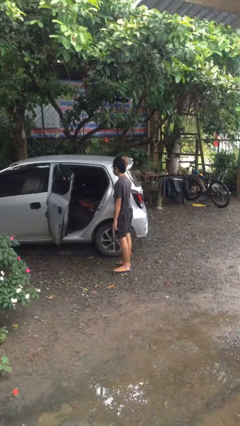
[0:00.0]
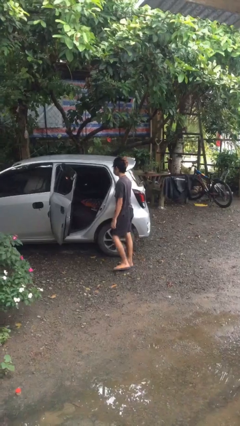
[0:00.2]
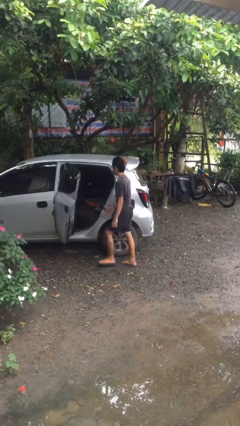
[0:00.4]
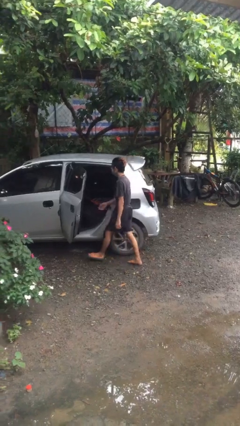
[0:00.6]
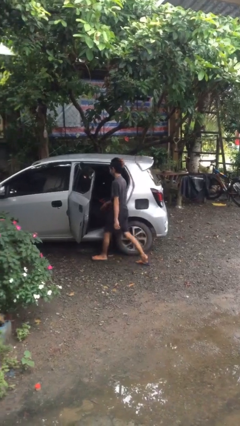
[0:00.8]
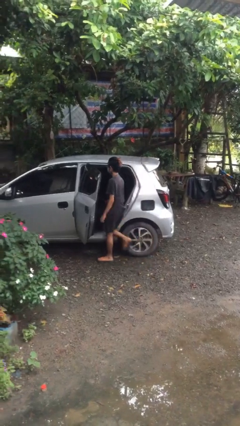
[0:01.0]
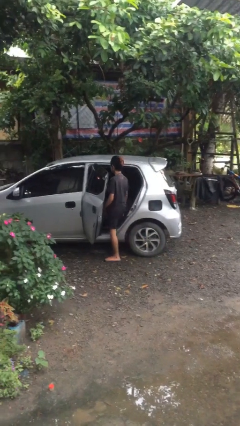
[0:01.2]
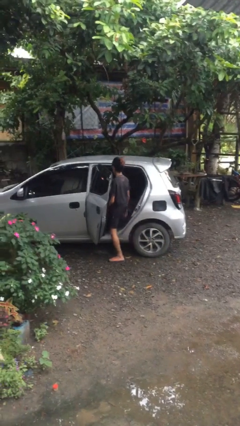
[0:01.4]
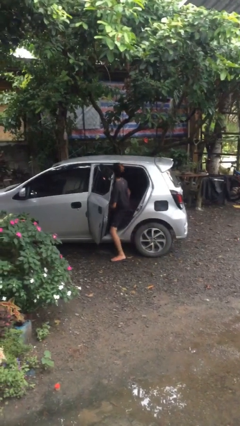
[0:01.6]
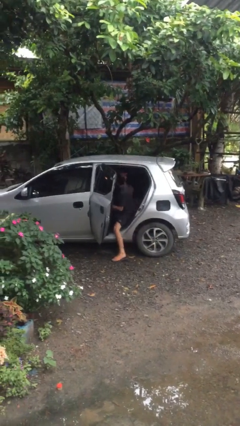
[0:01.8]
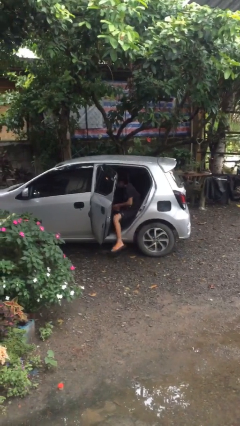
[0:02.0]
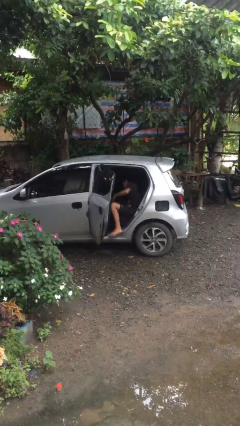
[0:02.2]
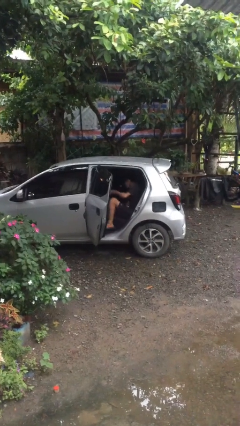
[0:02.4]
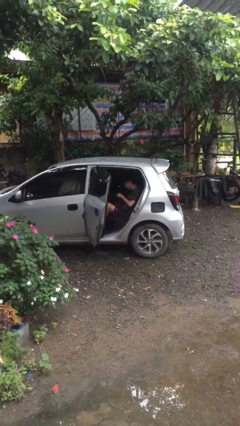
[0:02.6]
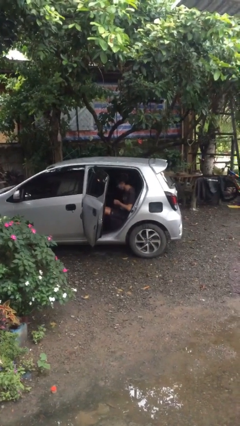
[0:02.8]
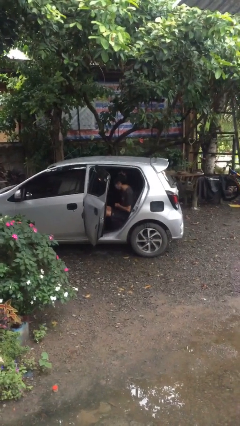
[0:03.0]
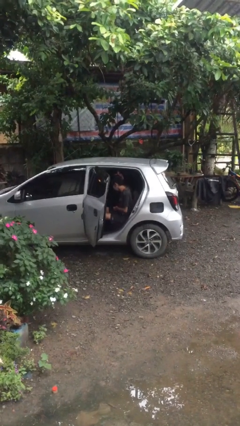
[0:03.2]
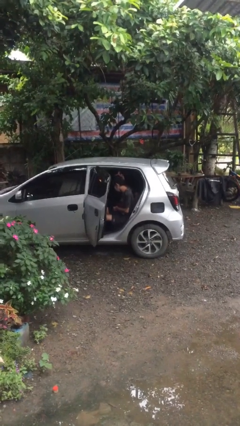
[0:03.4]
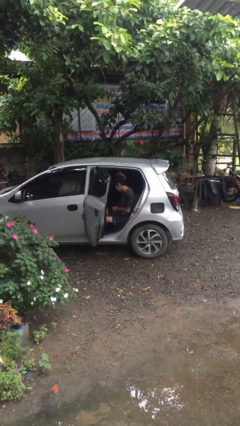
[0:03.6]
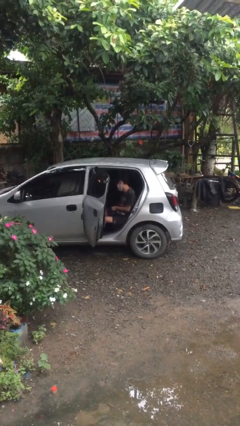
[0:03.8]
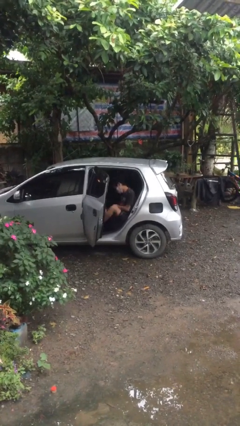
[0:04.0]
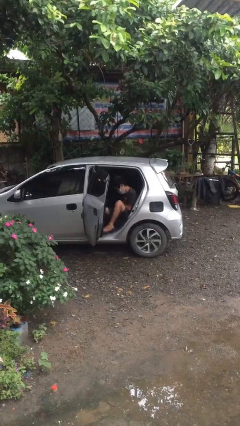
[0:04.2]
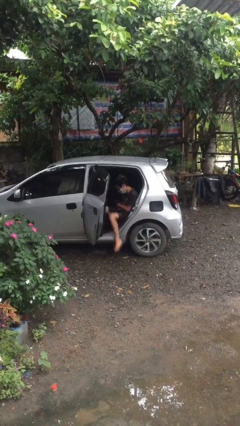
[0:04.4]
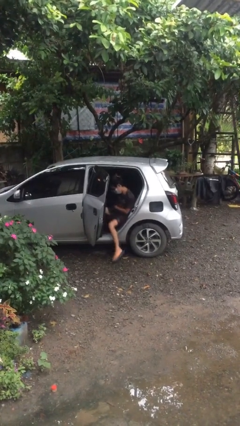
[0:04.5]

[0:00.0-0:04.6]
person enters car

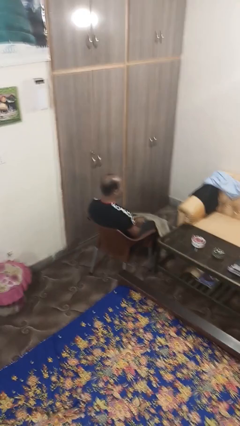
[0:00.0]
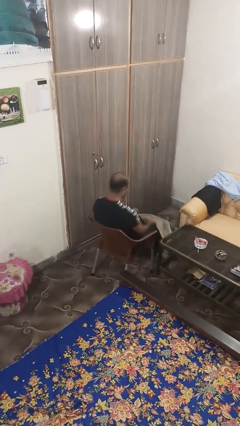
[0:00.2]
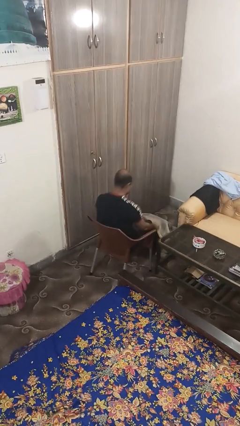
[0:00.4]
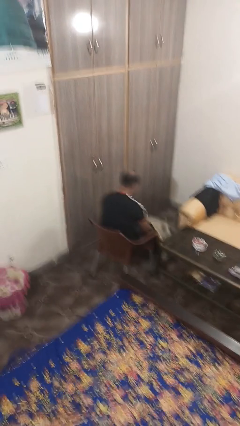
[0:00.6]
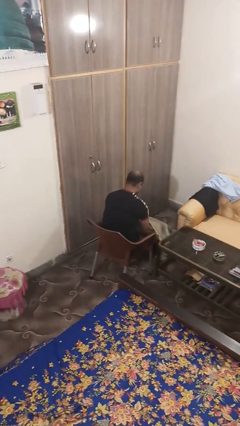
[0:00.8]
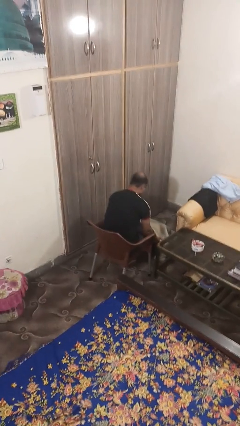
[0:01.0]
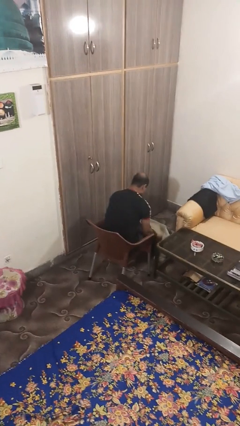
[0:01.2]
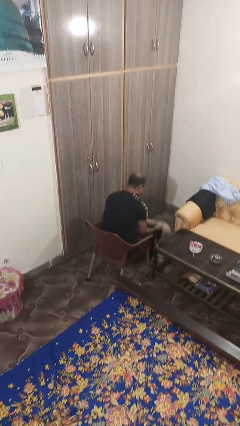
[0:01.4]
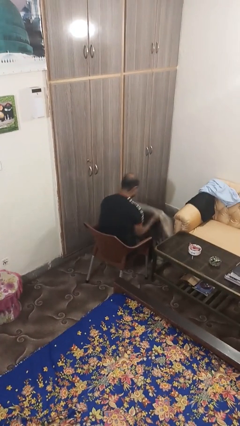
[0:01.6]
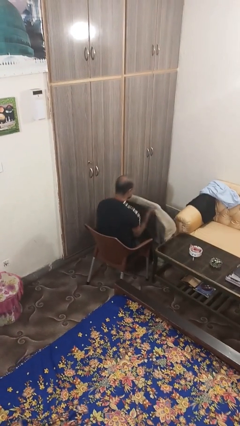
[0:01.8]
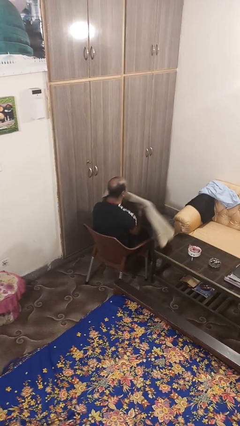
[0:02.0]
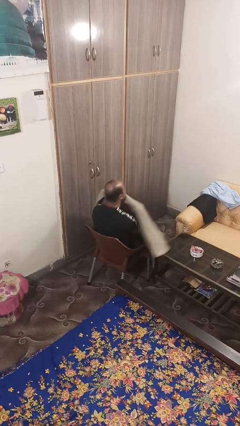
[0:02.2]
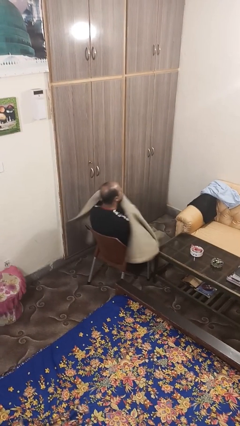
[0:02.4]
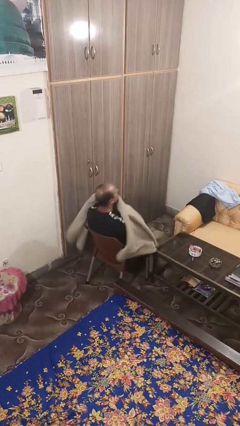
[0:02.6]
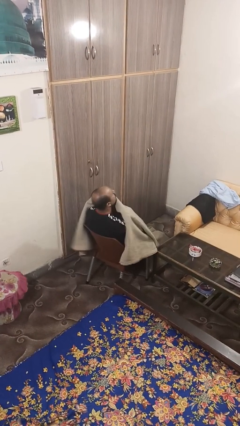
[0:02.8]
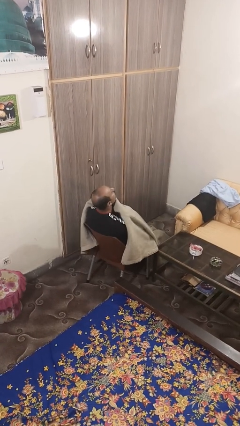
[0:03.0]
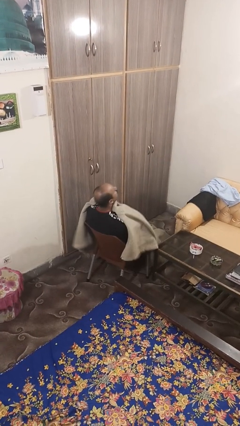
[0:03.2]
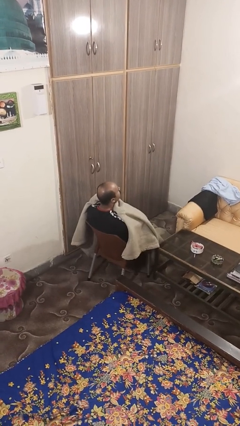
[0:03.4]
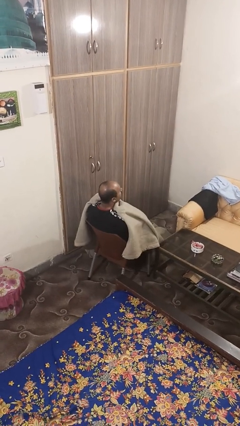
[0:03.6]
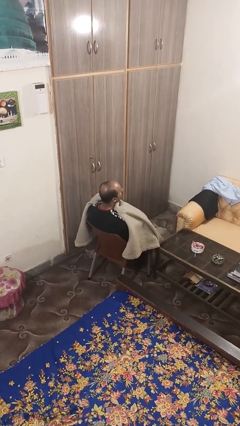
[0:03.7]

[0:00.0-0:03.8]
person covers with blanket

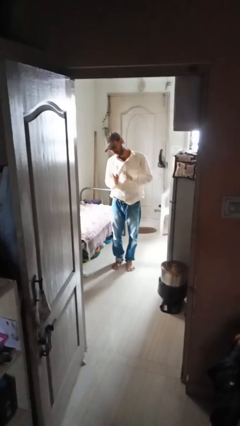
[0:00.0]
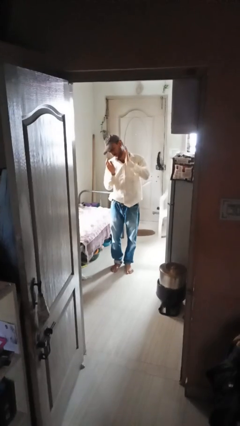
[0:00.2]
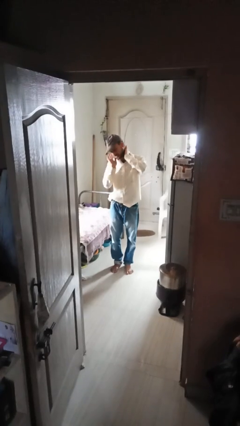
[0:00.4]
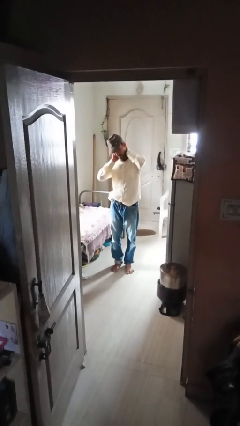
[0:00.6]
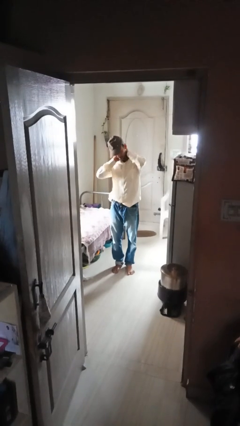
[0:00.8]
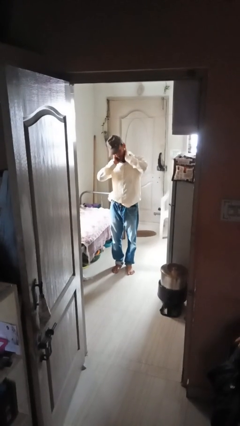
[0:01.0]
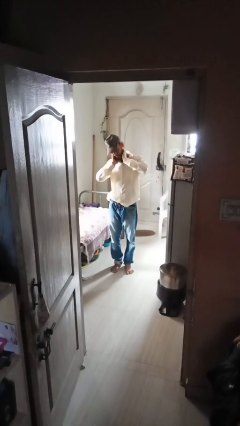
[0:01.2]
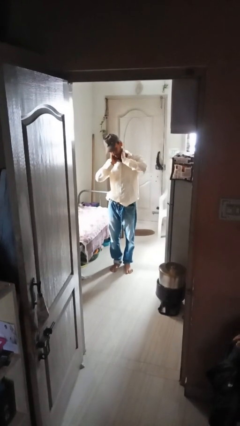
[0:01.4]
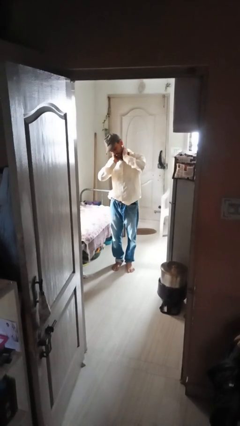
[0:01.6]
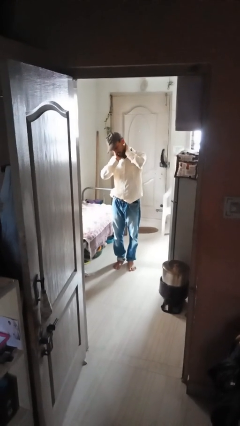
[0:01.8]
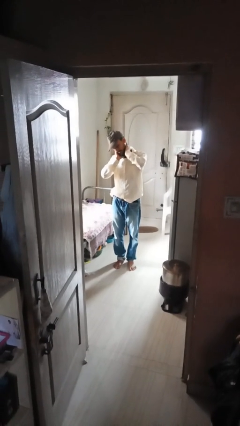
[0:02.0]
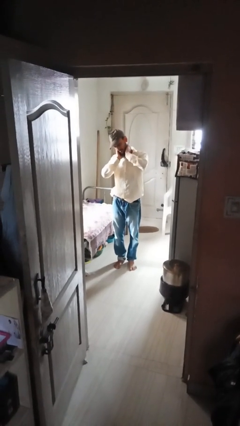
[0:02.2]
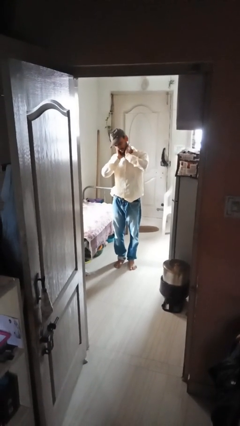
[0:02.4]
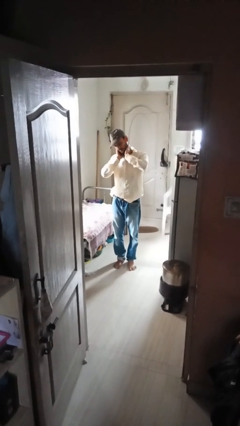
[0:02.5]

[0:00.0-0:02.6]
person rubs neck

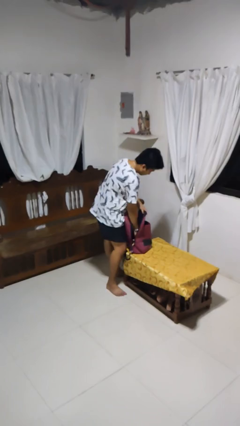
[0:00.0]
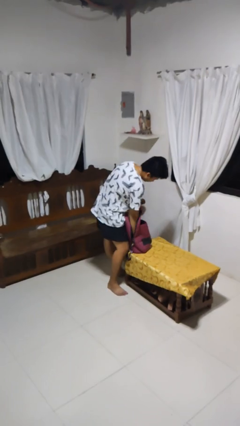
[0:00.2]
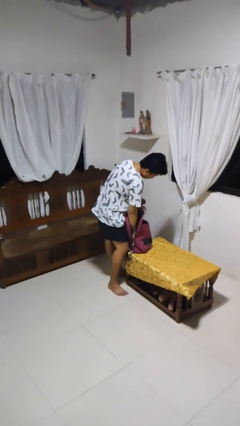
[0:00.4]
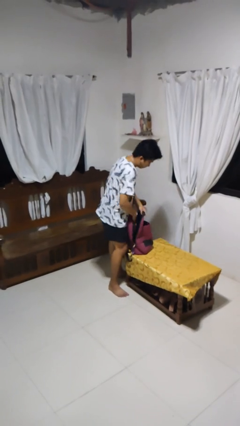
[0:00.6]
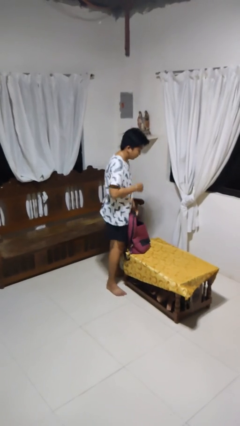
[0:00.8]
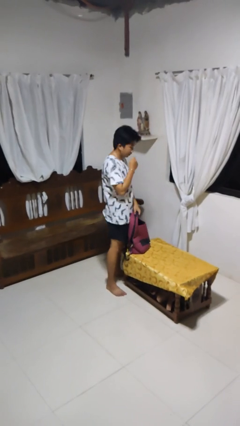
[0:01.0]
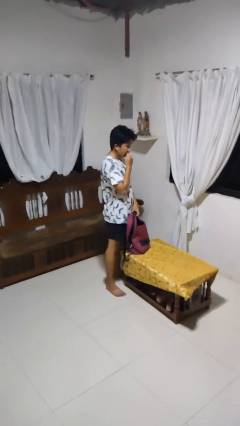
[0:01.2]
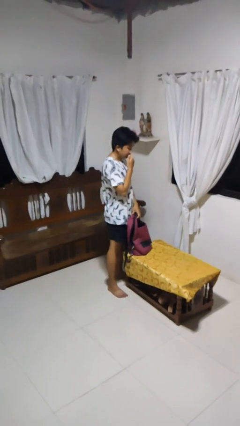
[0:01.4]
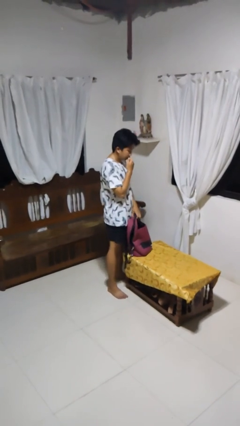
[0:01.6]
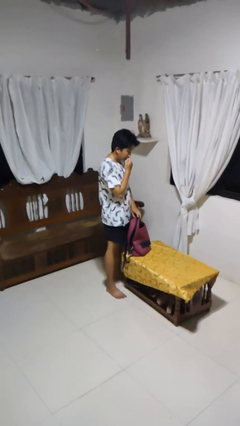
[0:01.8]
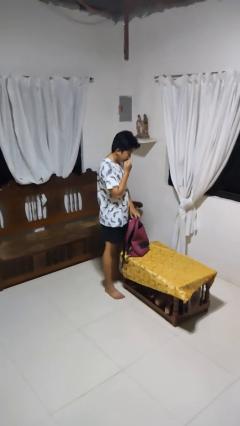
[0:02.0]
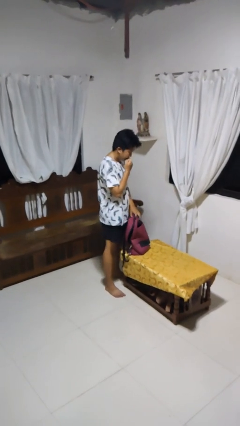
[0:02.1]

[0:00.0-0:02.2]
person eats snack from bag

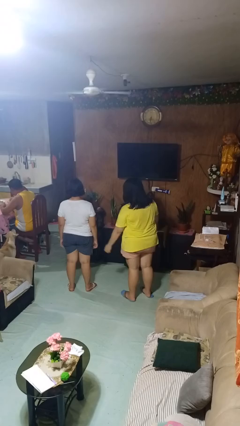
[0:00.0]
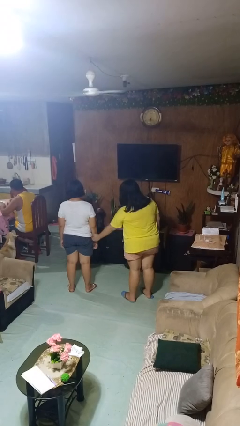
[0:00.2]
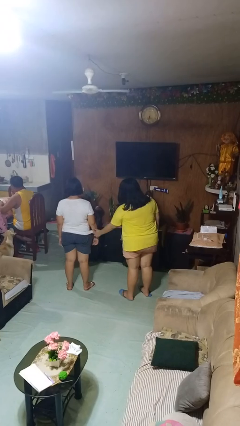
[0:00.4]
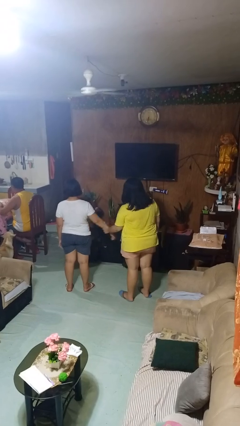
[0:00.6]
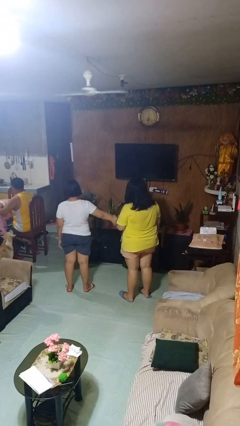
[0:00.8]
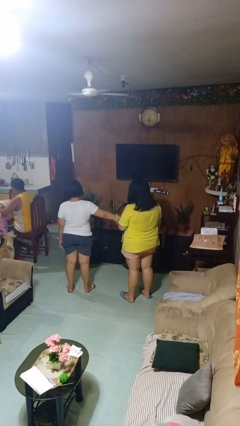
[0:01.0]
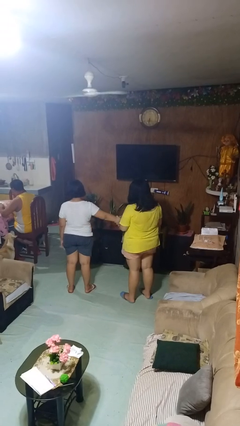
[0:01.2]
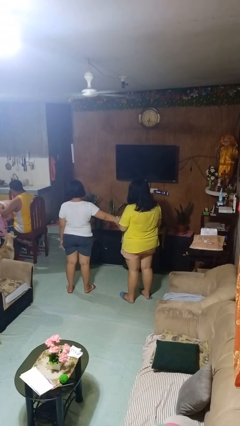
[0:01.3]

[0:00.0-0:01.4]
person grabs person by forearm

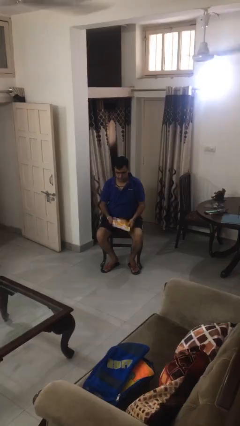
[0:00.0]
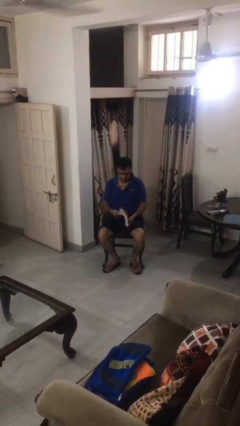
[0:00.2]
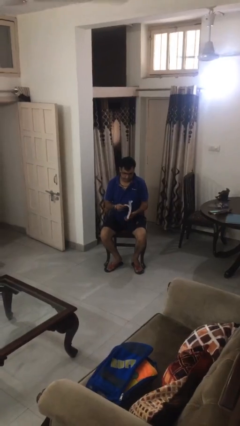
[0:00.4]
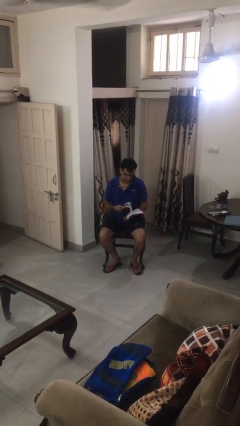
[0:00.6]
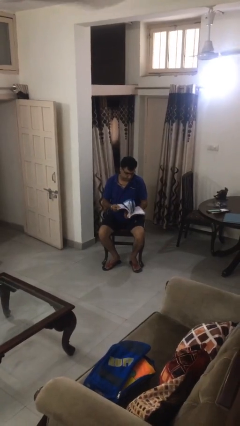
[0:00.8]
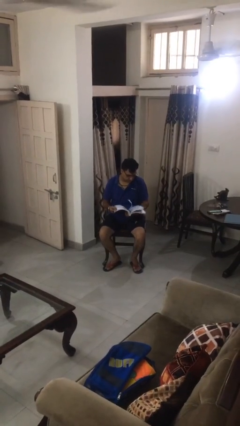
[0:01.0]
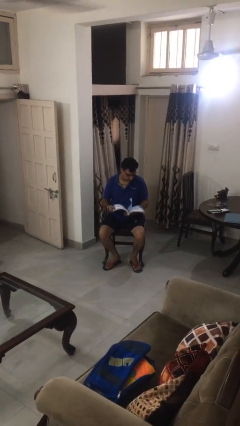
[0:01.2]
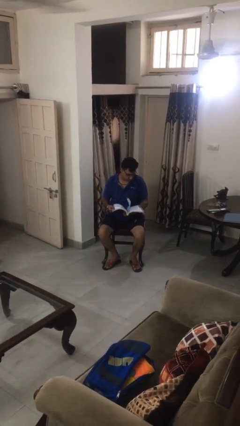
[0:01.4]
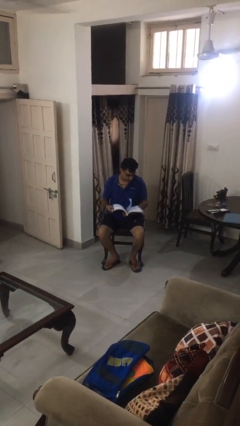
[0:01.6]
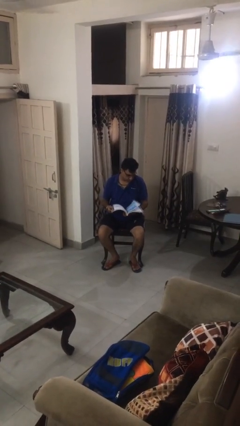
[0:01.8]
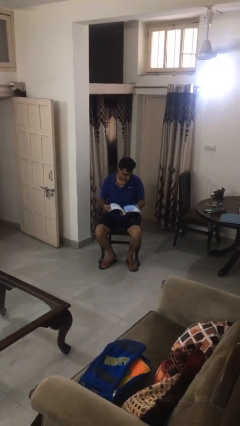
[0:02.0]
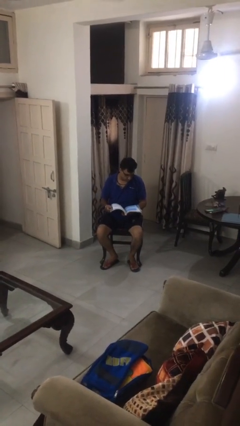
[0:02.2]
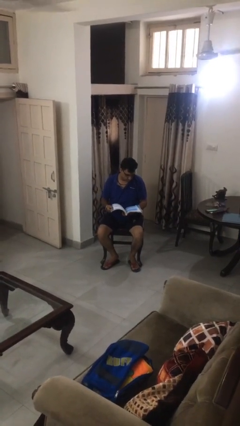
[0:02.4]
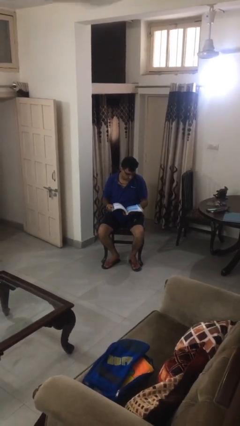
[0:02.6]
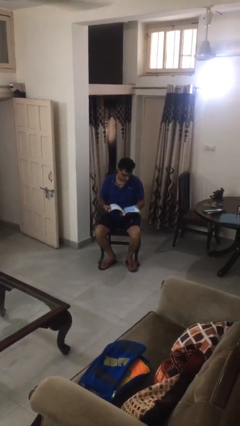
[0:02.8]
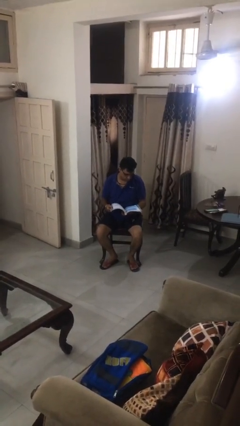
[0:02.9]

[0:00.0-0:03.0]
person reads book
